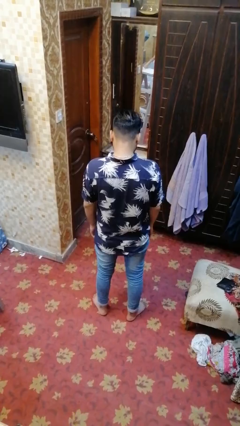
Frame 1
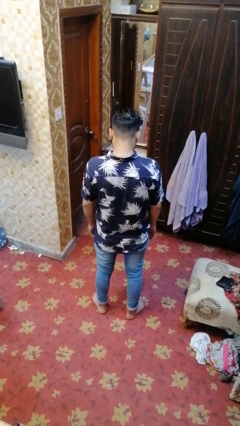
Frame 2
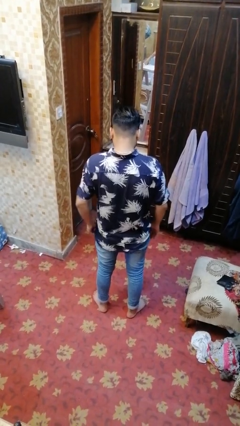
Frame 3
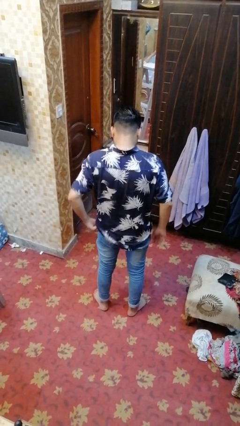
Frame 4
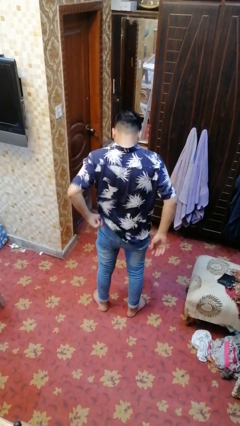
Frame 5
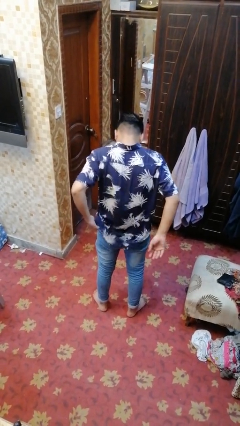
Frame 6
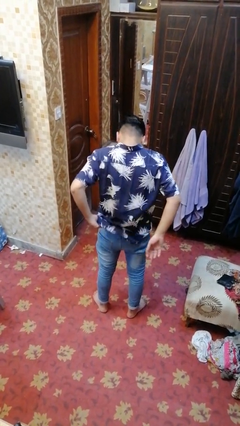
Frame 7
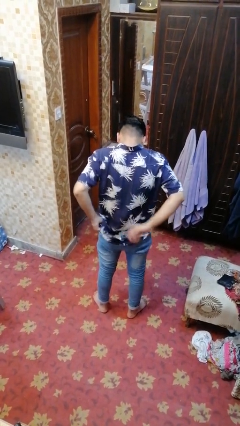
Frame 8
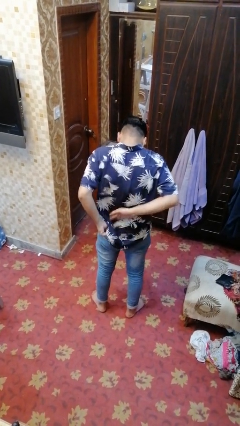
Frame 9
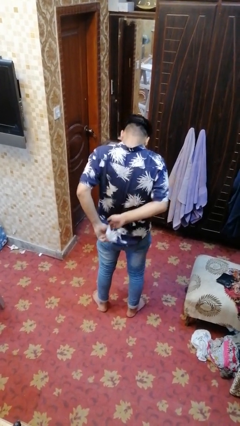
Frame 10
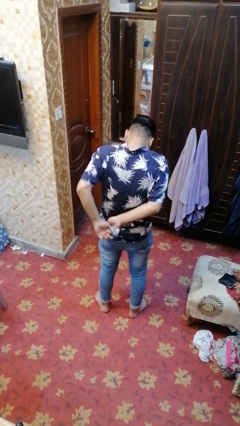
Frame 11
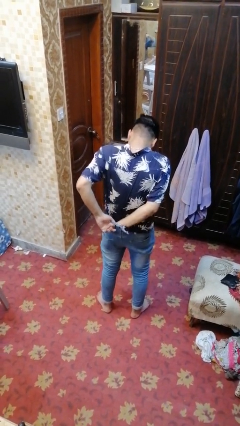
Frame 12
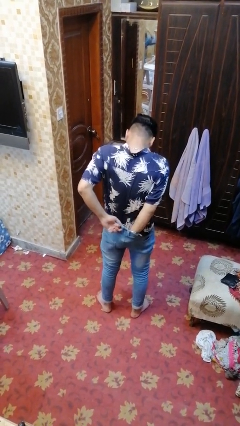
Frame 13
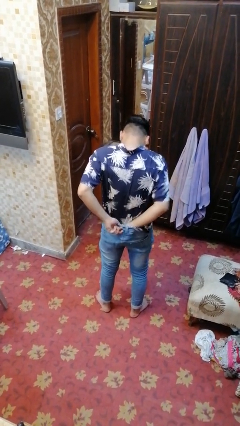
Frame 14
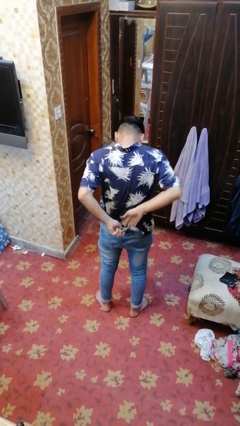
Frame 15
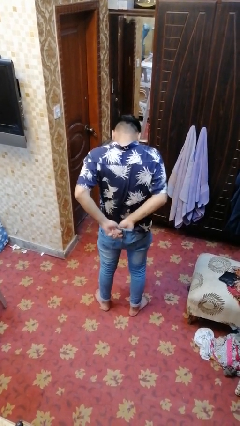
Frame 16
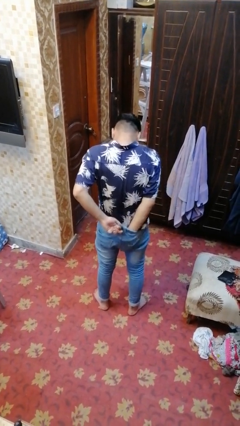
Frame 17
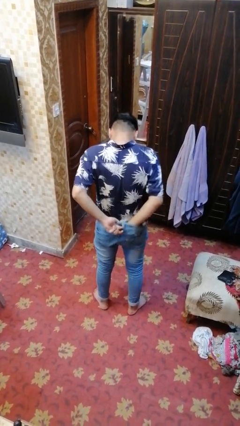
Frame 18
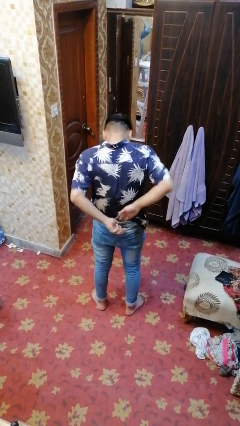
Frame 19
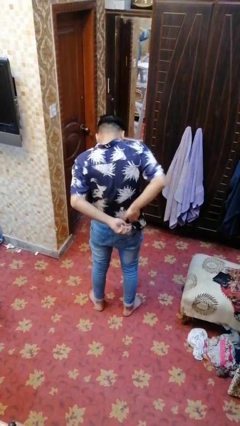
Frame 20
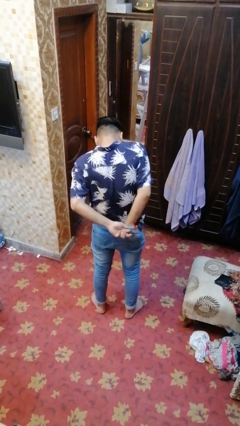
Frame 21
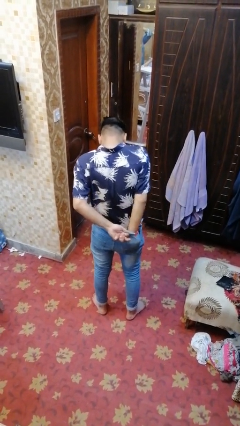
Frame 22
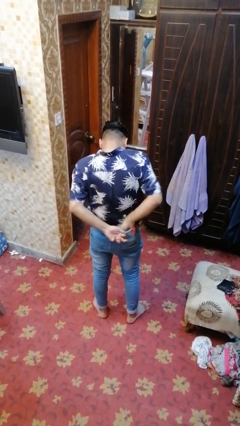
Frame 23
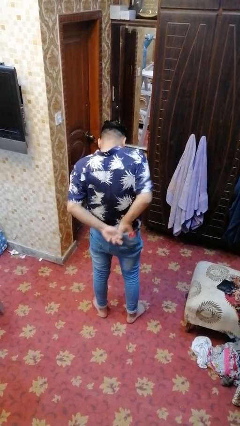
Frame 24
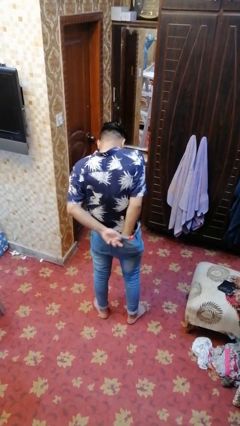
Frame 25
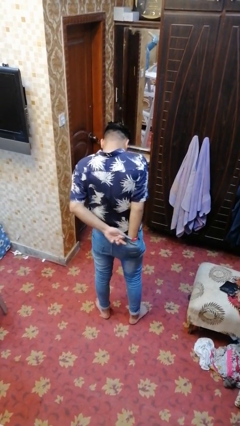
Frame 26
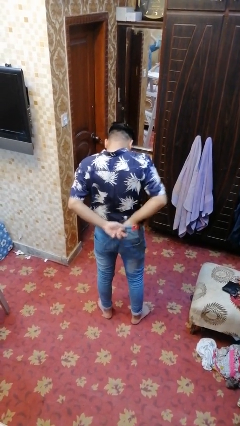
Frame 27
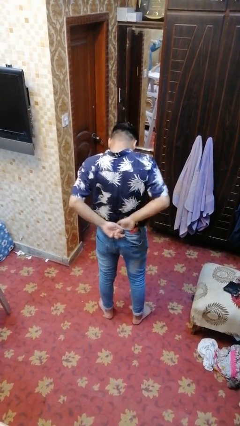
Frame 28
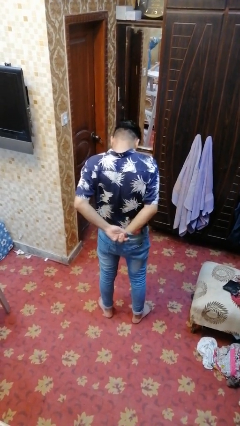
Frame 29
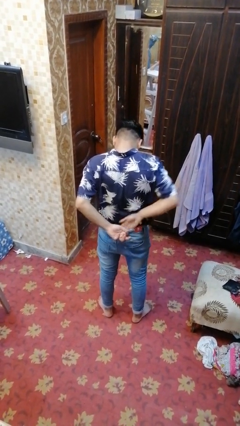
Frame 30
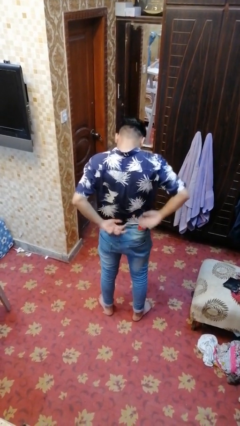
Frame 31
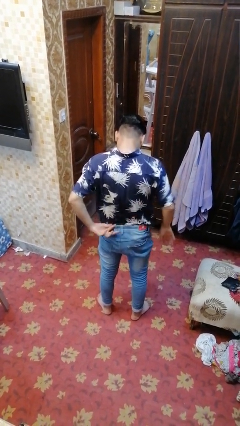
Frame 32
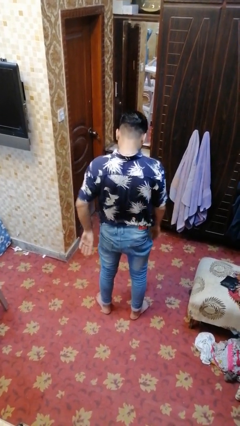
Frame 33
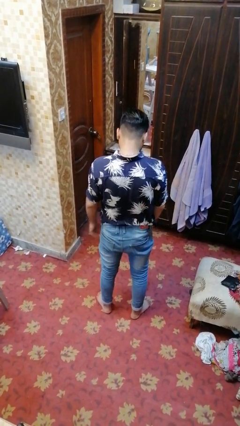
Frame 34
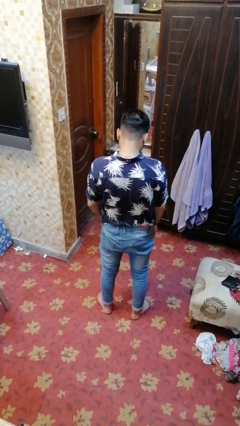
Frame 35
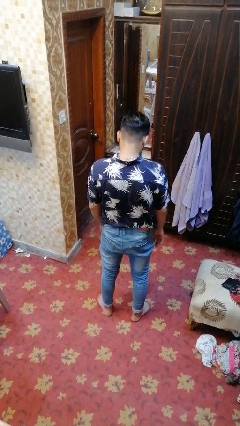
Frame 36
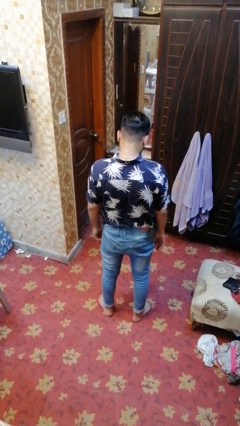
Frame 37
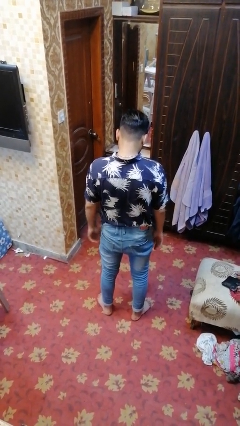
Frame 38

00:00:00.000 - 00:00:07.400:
person tucks in shirt

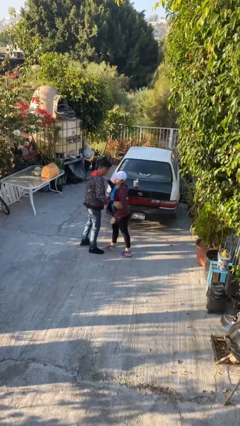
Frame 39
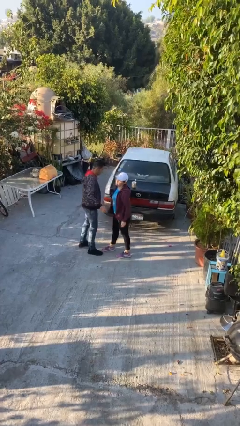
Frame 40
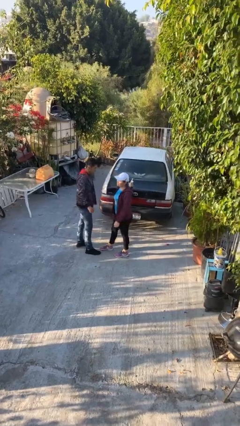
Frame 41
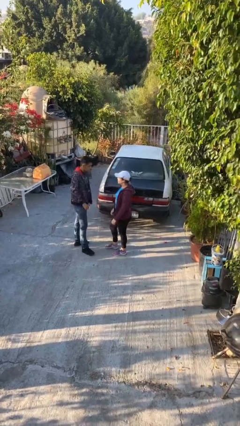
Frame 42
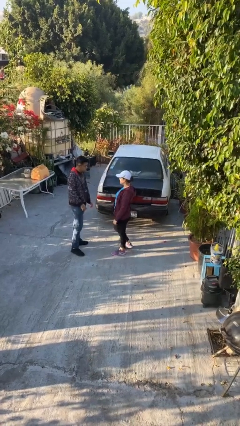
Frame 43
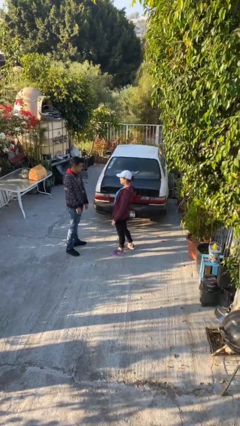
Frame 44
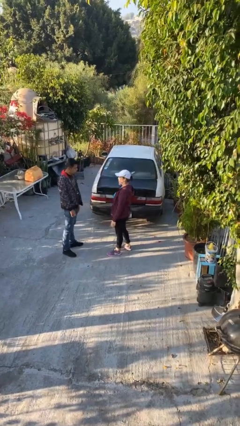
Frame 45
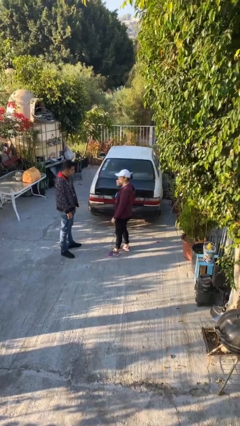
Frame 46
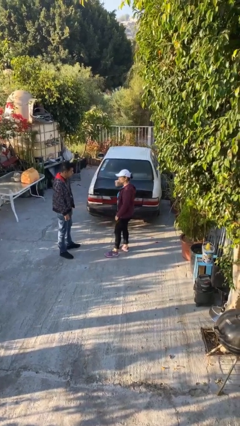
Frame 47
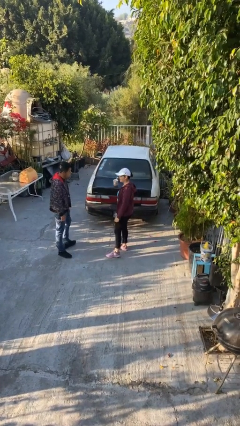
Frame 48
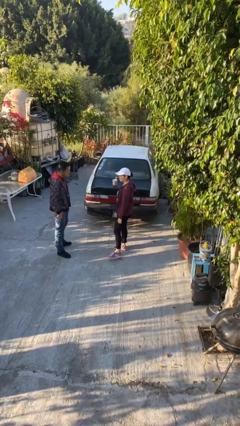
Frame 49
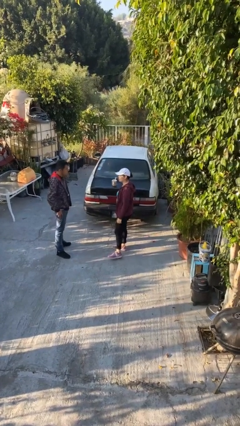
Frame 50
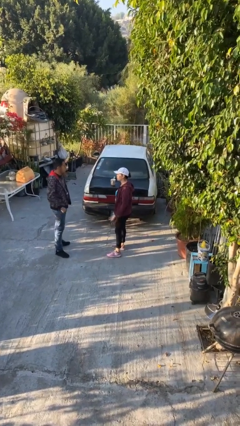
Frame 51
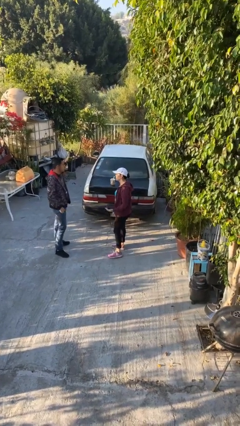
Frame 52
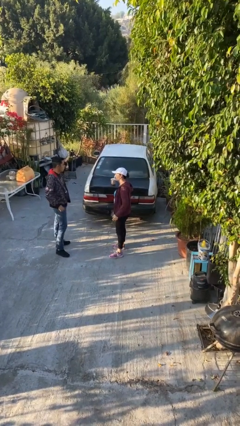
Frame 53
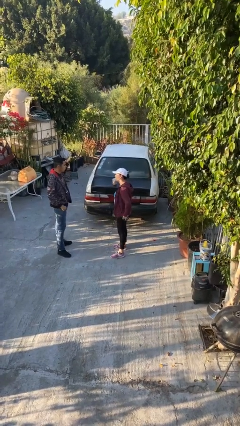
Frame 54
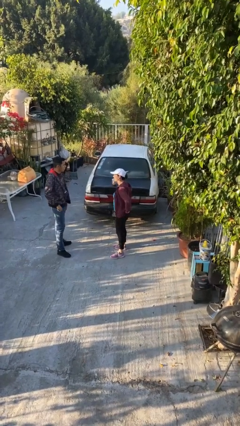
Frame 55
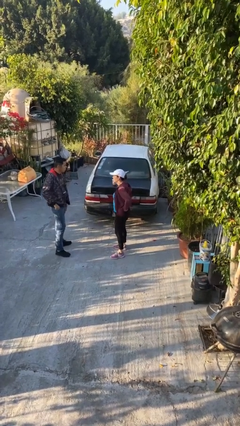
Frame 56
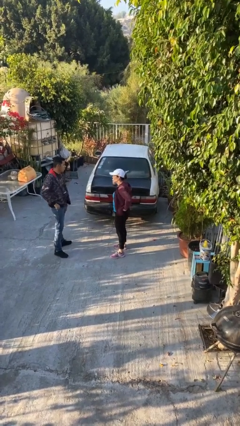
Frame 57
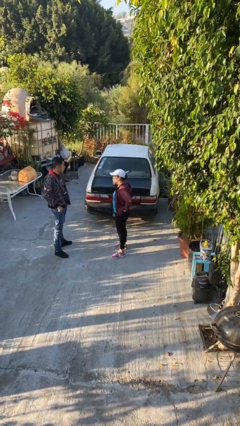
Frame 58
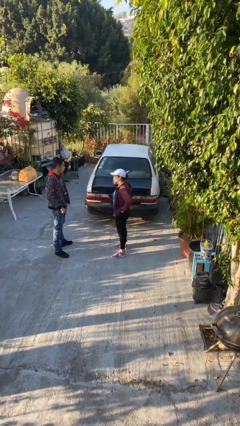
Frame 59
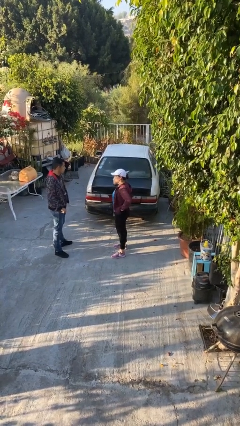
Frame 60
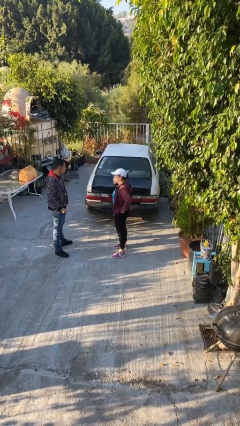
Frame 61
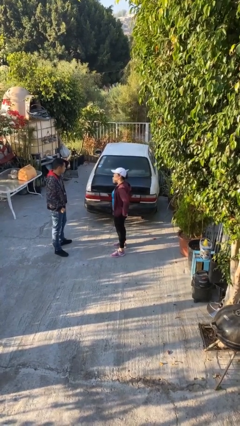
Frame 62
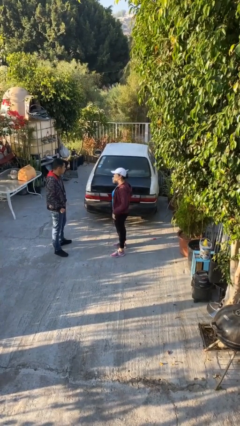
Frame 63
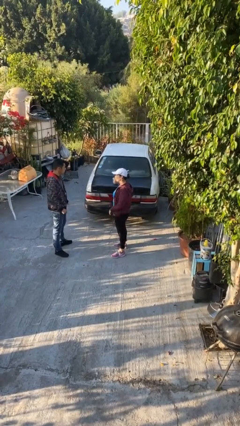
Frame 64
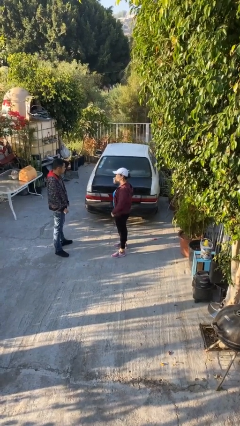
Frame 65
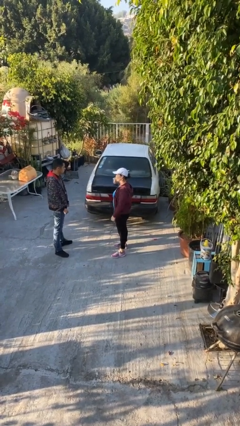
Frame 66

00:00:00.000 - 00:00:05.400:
person talks to person

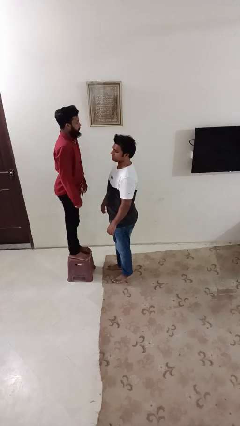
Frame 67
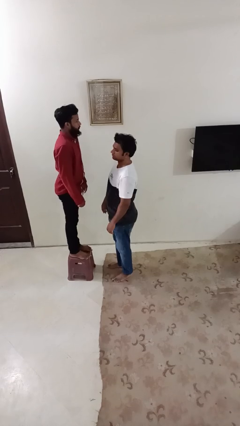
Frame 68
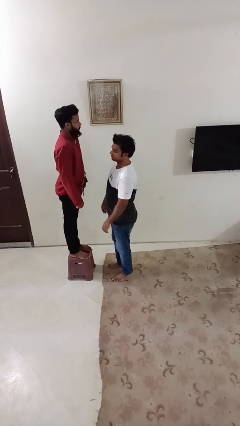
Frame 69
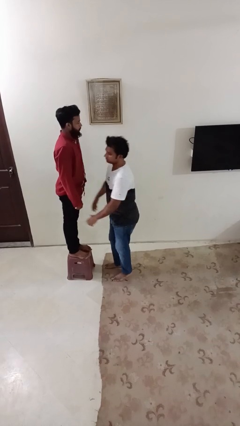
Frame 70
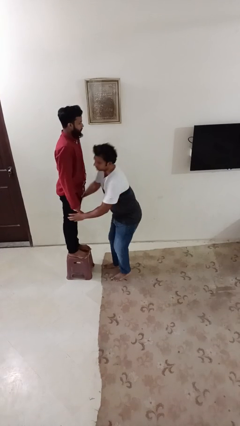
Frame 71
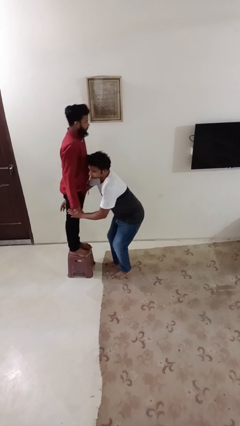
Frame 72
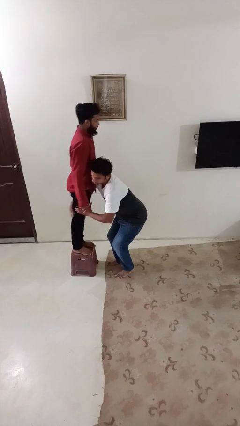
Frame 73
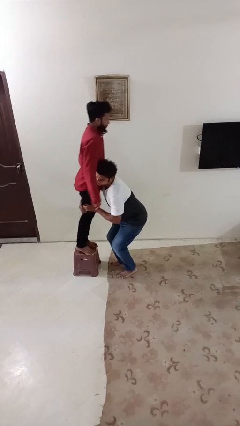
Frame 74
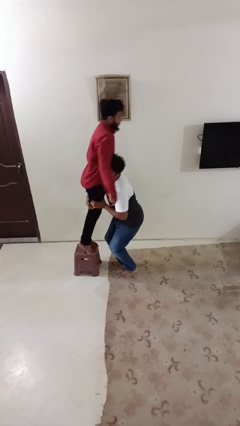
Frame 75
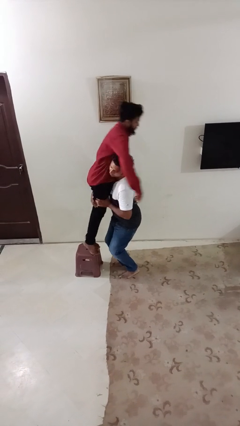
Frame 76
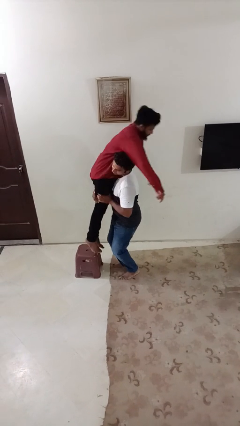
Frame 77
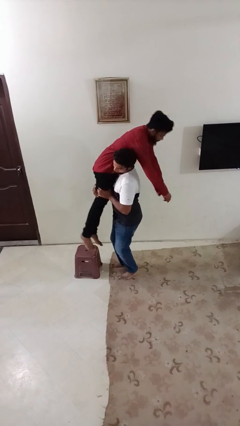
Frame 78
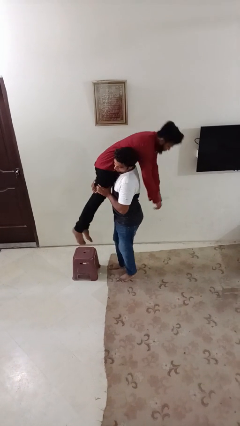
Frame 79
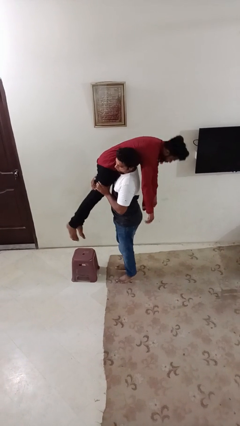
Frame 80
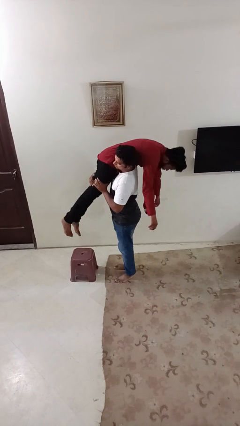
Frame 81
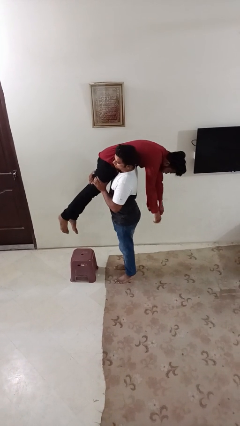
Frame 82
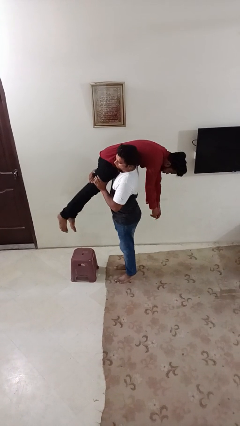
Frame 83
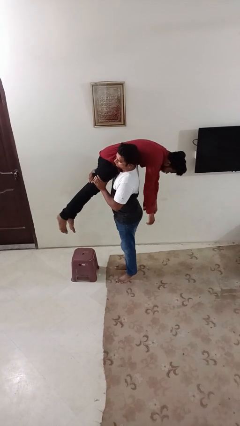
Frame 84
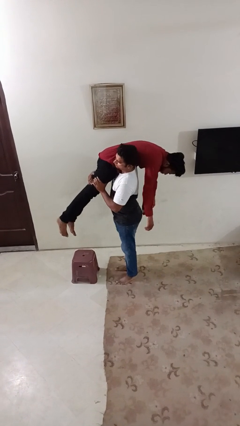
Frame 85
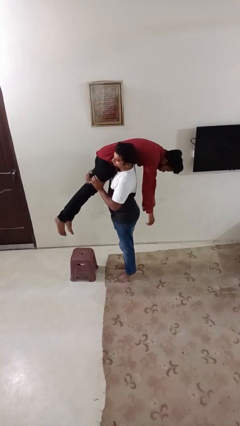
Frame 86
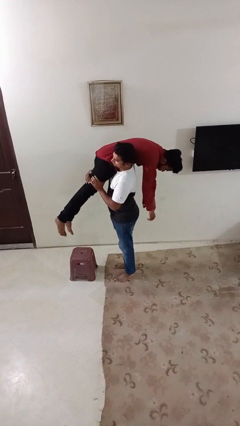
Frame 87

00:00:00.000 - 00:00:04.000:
person carries person over shoulder

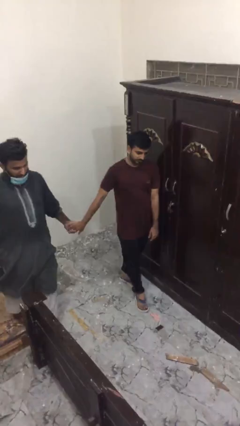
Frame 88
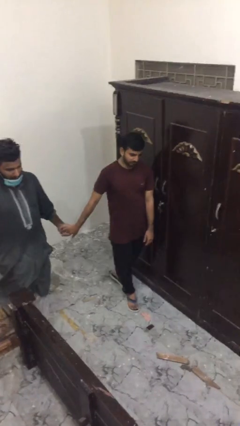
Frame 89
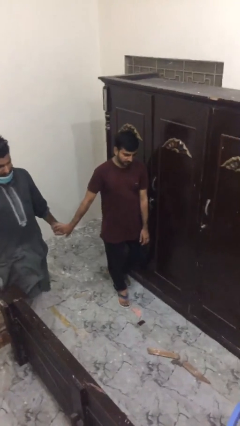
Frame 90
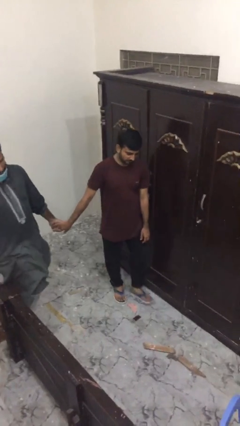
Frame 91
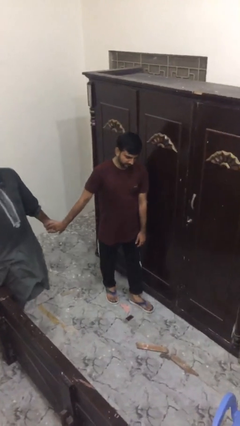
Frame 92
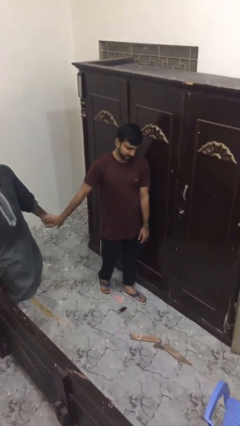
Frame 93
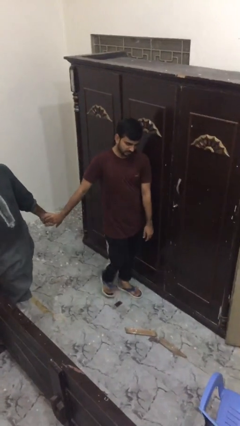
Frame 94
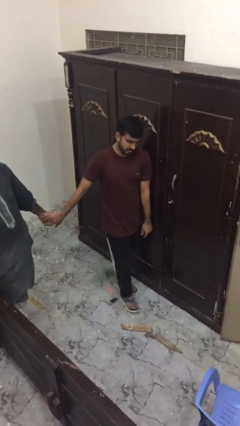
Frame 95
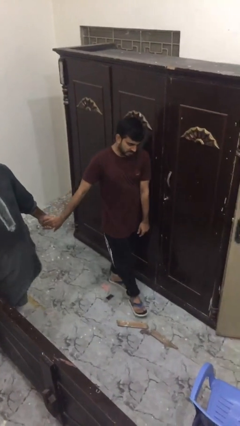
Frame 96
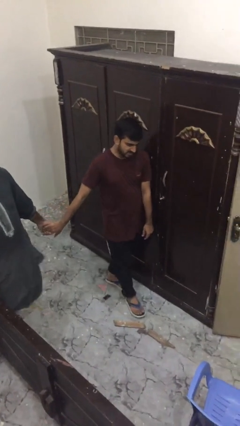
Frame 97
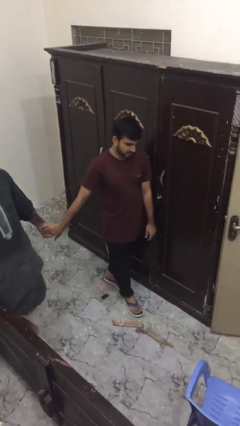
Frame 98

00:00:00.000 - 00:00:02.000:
person holds hand
